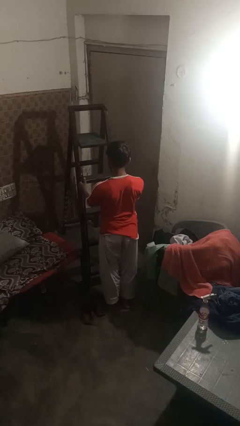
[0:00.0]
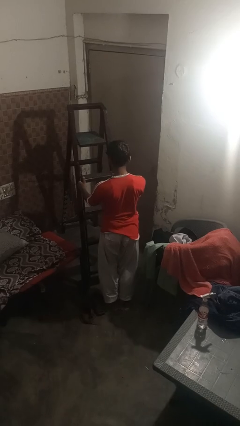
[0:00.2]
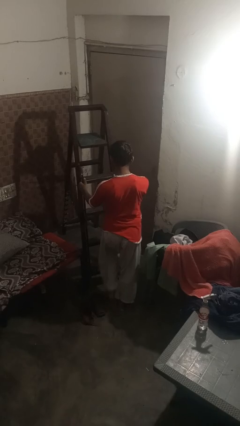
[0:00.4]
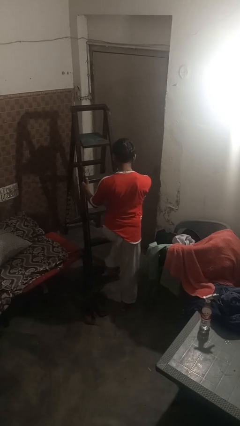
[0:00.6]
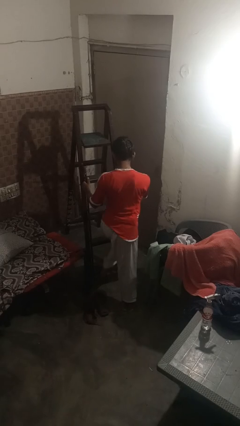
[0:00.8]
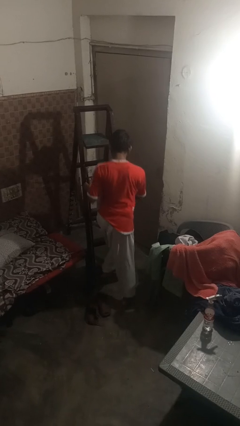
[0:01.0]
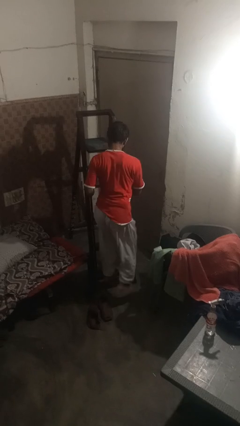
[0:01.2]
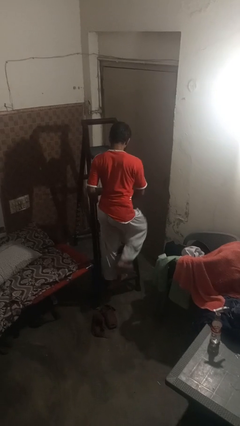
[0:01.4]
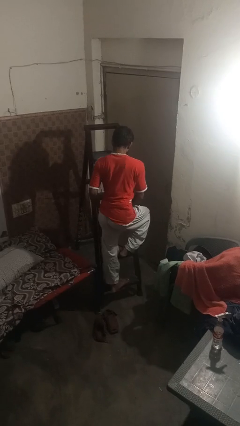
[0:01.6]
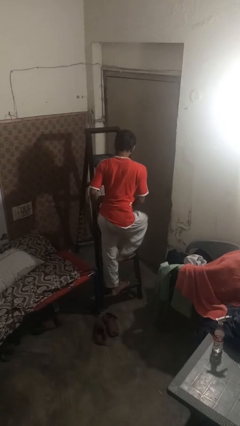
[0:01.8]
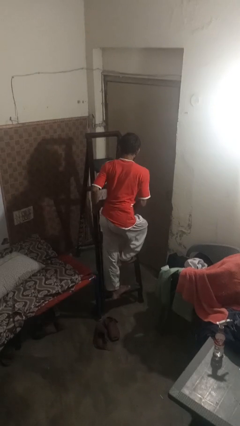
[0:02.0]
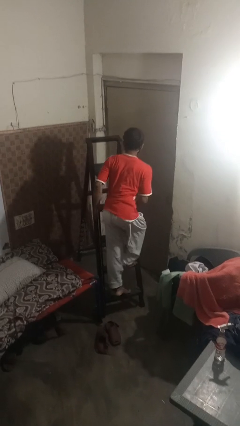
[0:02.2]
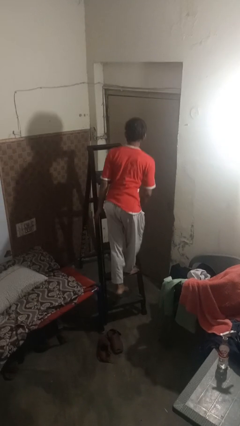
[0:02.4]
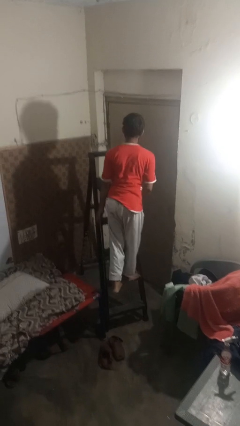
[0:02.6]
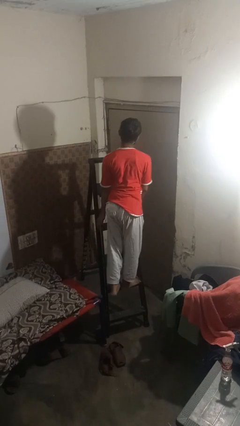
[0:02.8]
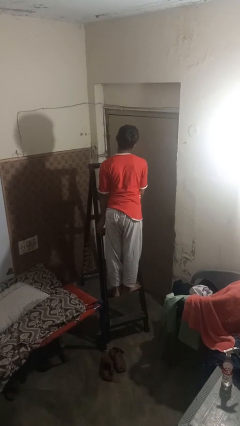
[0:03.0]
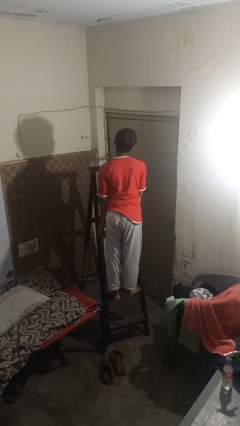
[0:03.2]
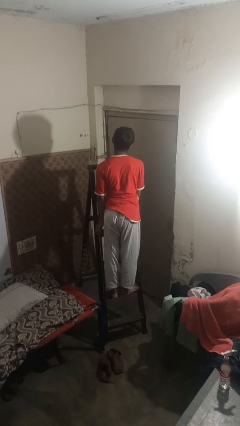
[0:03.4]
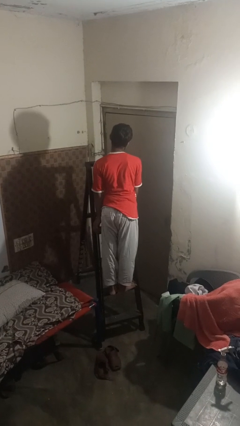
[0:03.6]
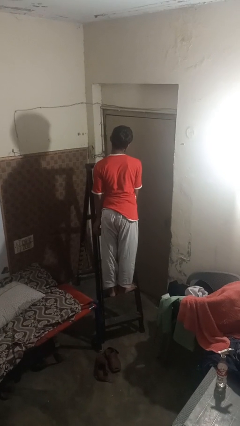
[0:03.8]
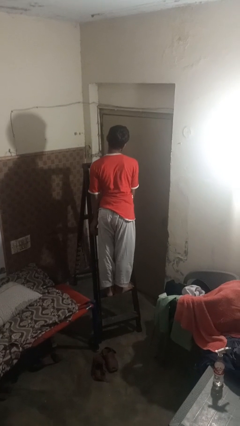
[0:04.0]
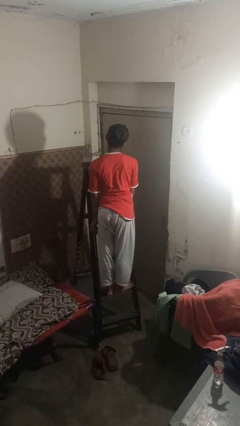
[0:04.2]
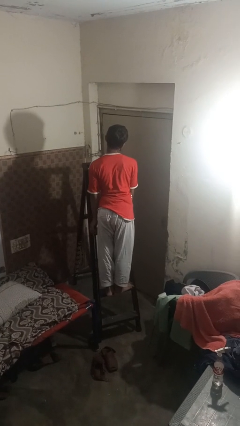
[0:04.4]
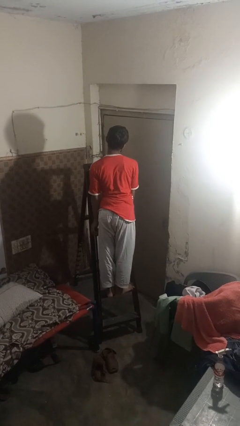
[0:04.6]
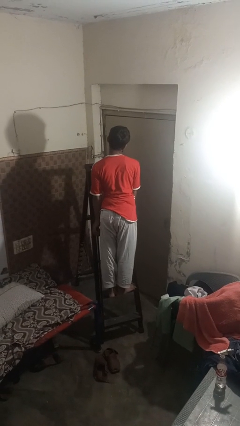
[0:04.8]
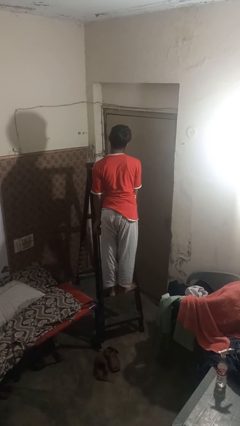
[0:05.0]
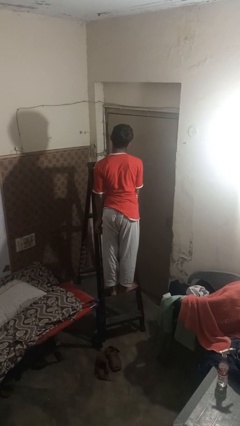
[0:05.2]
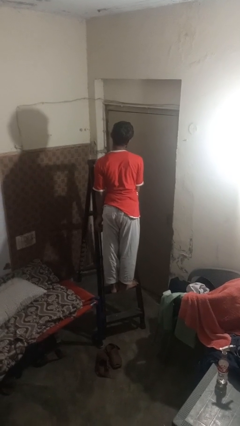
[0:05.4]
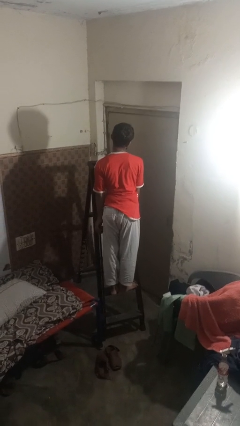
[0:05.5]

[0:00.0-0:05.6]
person climbs up ladder

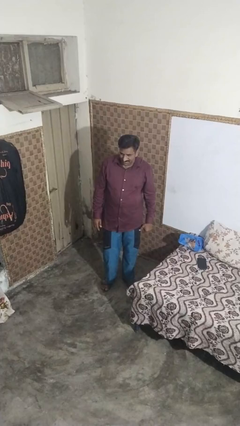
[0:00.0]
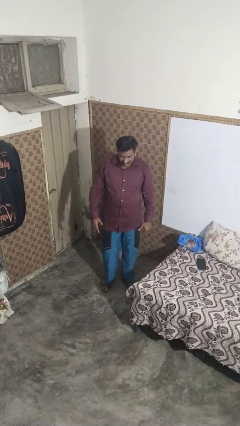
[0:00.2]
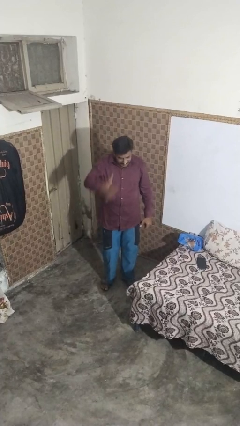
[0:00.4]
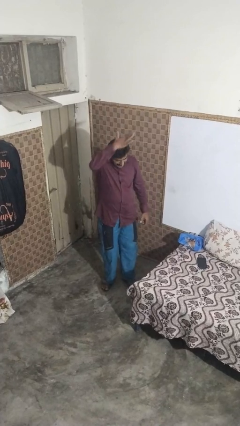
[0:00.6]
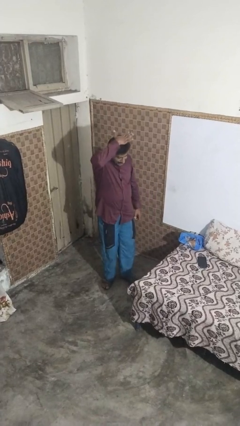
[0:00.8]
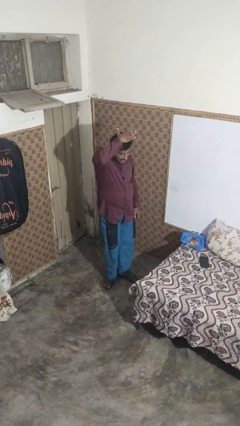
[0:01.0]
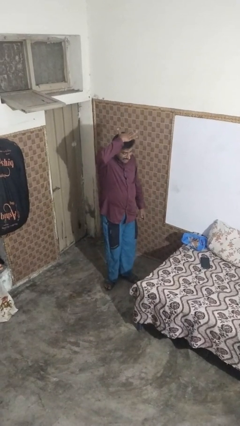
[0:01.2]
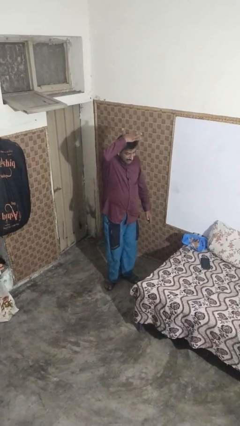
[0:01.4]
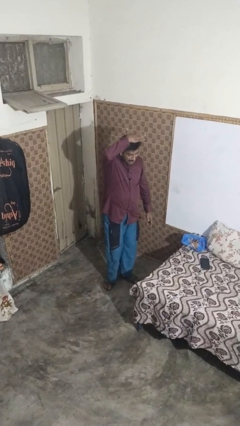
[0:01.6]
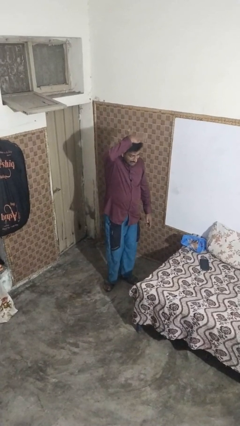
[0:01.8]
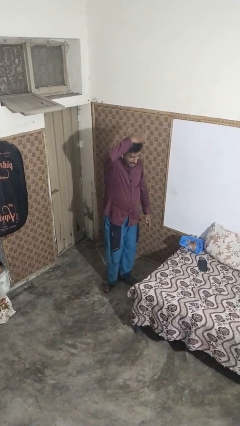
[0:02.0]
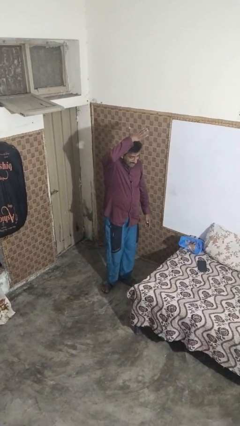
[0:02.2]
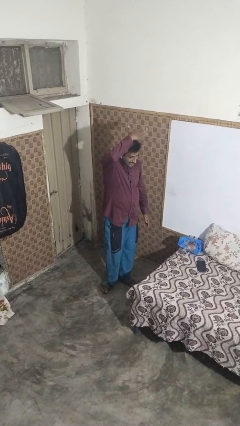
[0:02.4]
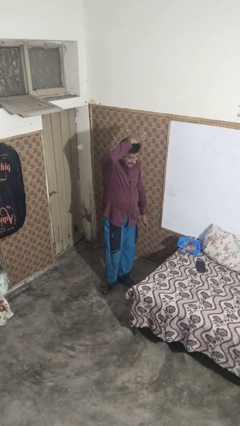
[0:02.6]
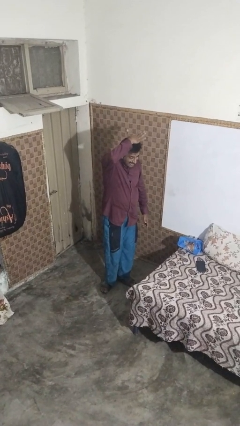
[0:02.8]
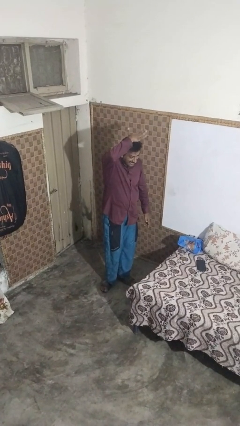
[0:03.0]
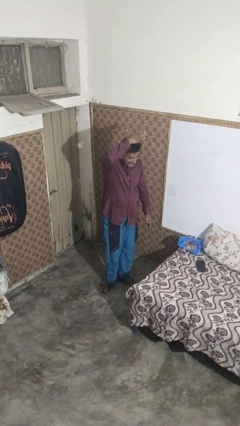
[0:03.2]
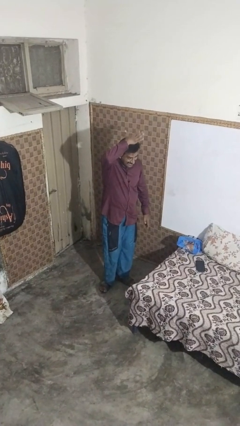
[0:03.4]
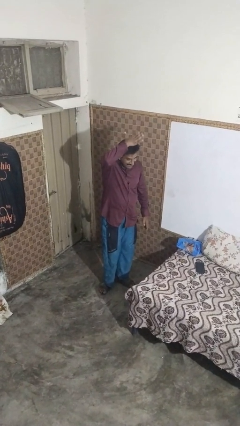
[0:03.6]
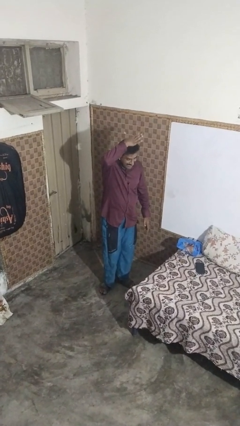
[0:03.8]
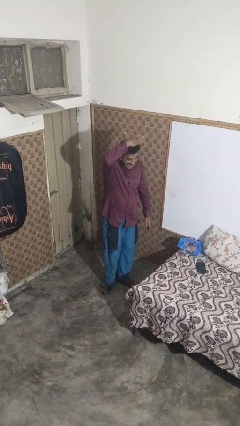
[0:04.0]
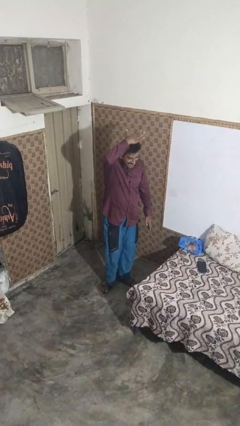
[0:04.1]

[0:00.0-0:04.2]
person pats head

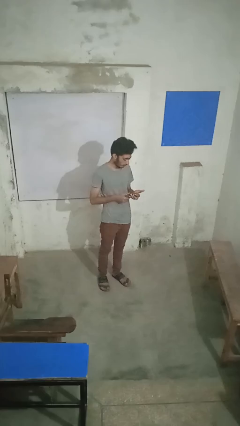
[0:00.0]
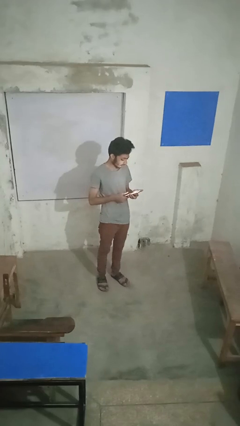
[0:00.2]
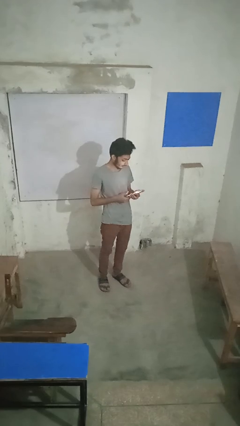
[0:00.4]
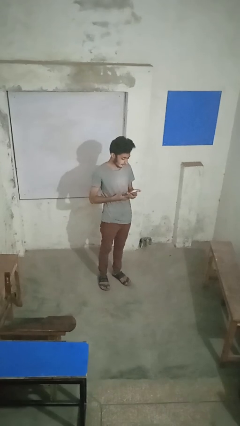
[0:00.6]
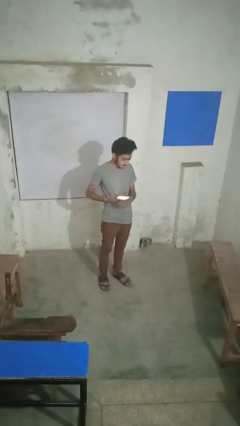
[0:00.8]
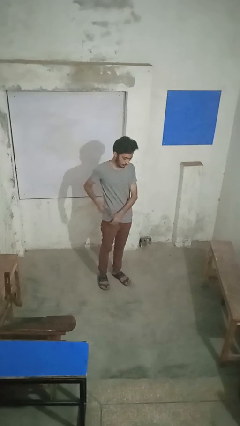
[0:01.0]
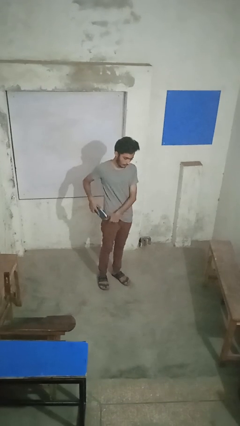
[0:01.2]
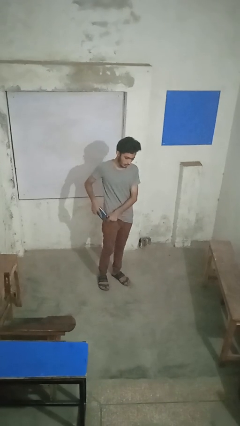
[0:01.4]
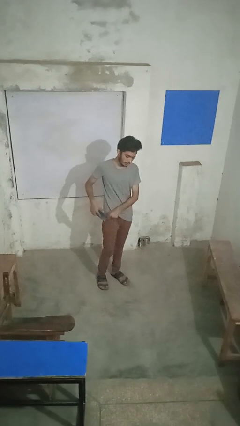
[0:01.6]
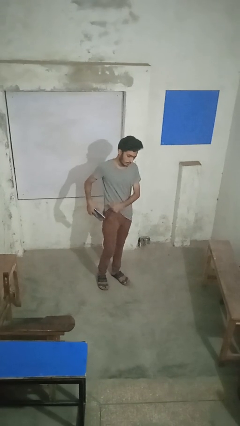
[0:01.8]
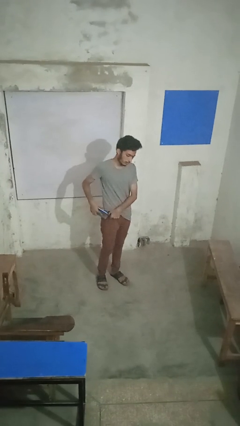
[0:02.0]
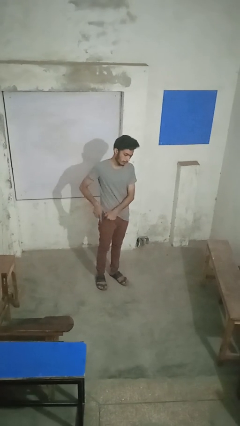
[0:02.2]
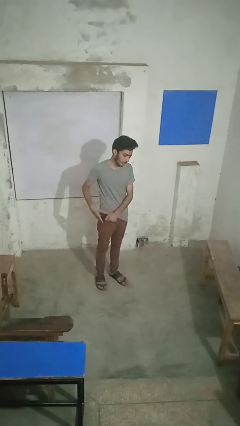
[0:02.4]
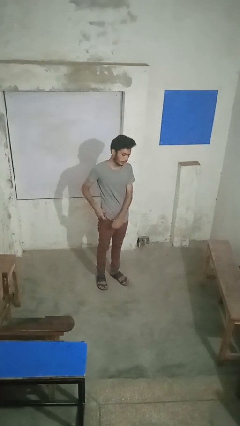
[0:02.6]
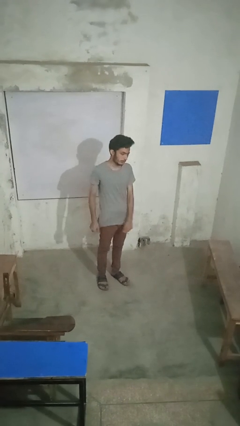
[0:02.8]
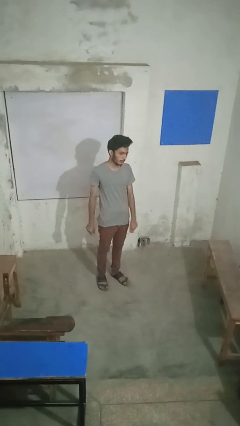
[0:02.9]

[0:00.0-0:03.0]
person puts phone into pocket

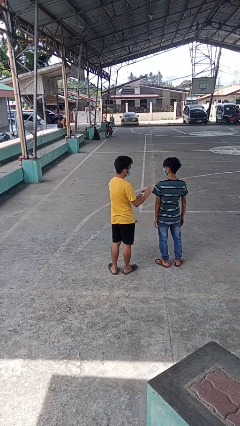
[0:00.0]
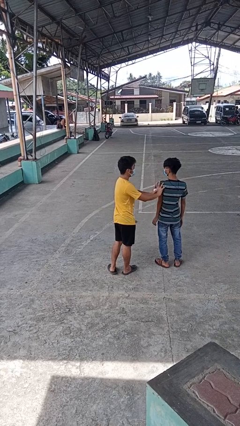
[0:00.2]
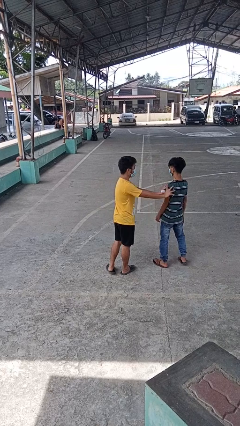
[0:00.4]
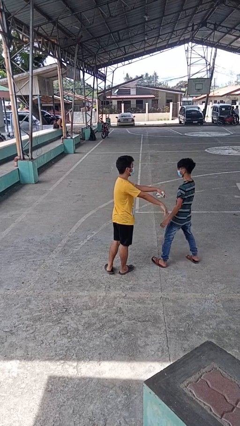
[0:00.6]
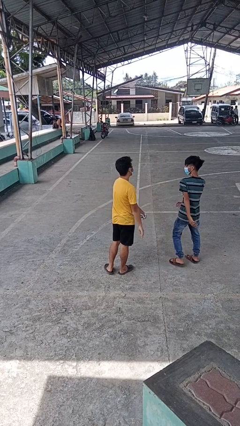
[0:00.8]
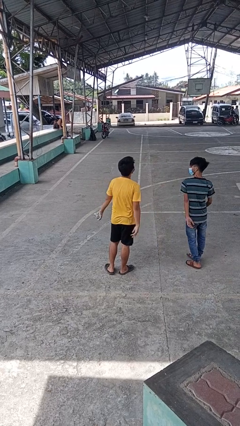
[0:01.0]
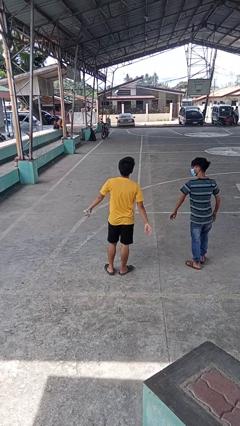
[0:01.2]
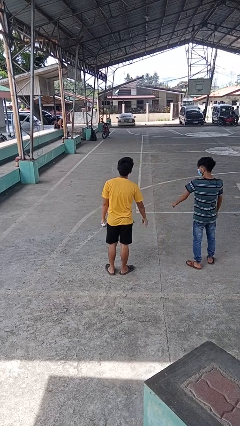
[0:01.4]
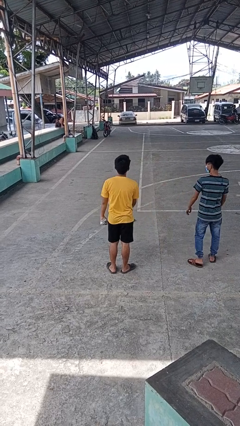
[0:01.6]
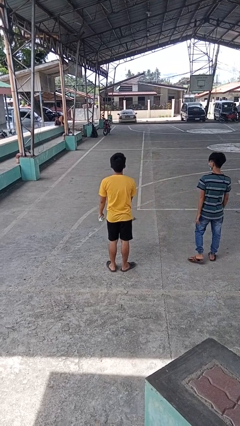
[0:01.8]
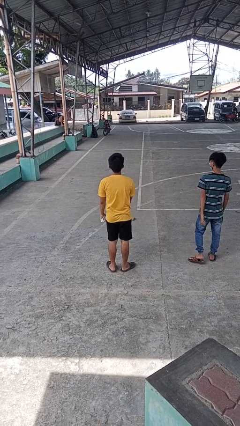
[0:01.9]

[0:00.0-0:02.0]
person shoves person

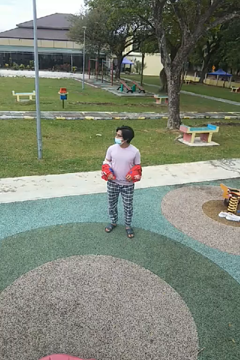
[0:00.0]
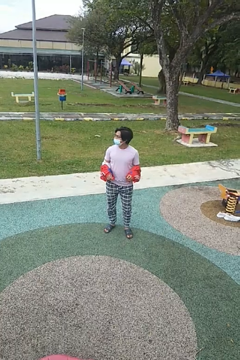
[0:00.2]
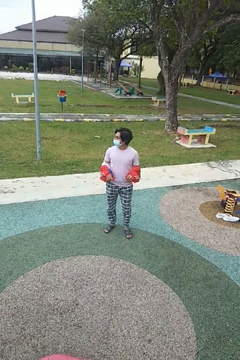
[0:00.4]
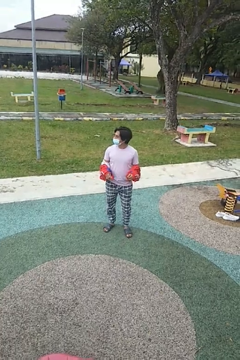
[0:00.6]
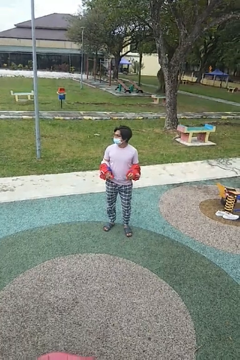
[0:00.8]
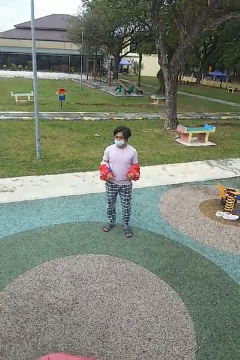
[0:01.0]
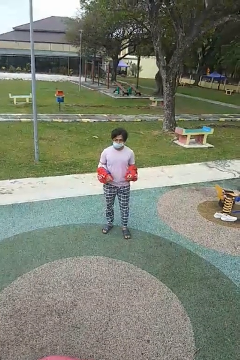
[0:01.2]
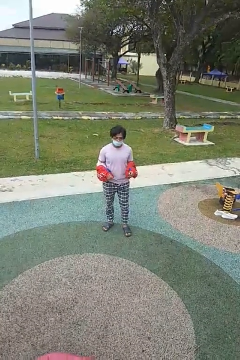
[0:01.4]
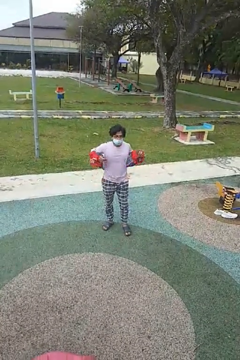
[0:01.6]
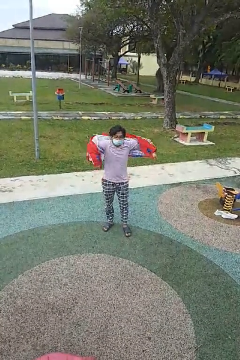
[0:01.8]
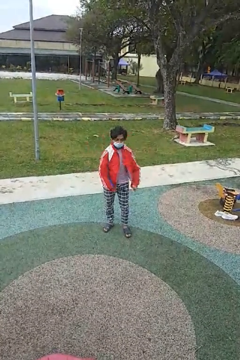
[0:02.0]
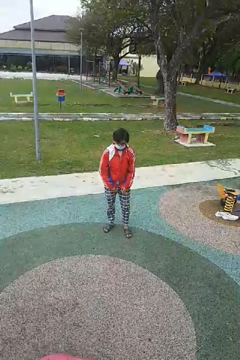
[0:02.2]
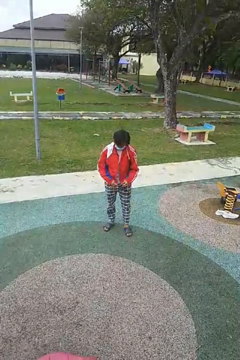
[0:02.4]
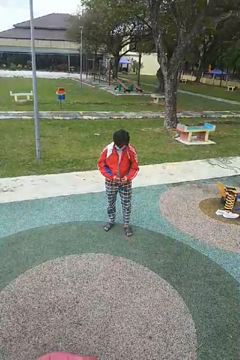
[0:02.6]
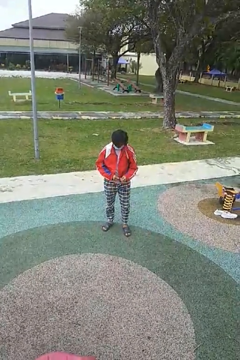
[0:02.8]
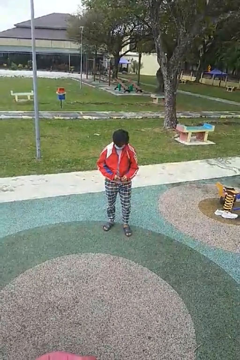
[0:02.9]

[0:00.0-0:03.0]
person puts on jacket
